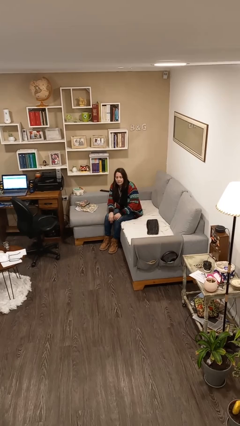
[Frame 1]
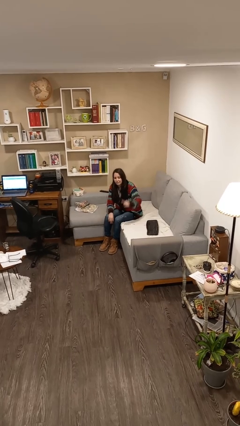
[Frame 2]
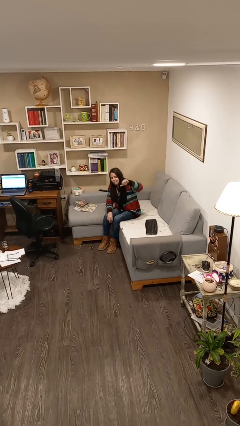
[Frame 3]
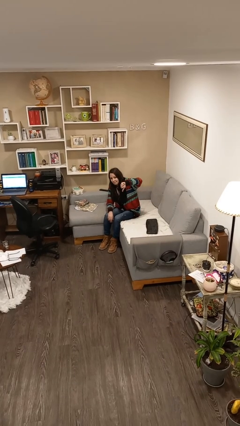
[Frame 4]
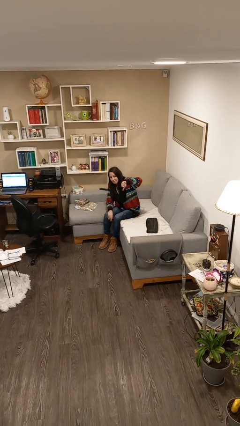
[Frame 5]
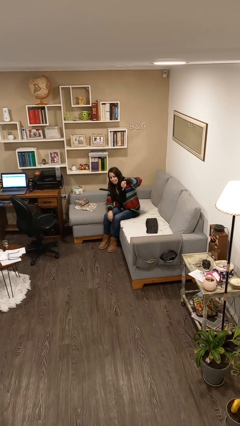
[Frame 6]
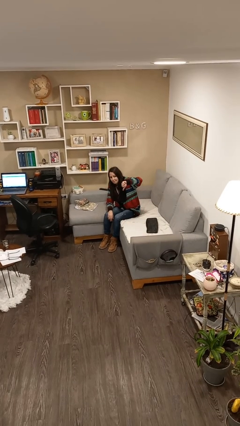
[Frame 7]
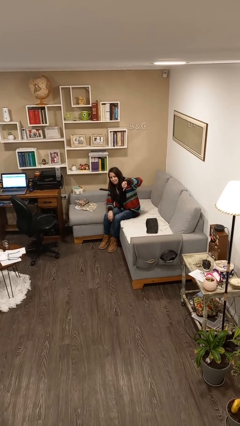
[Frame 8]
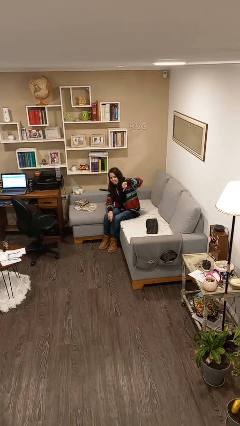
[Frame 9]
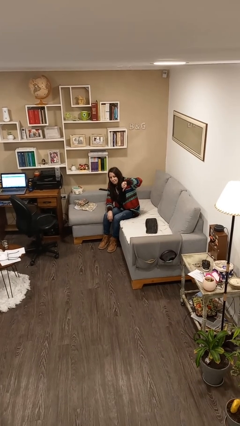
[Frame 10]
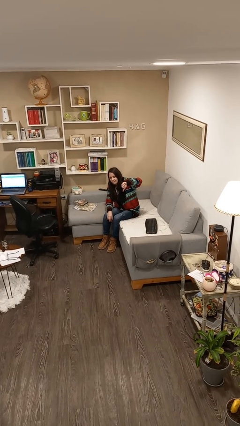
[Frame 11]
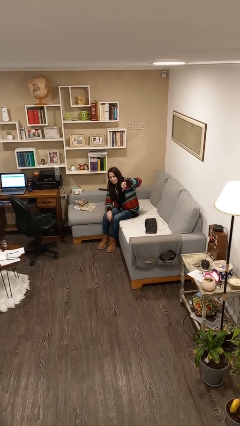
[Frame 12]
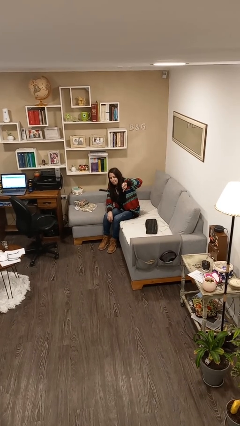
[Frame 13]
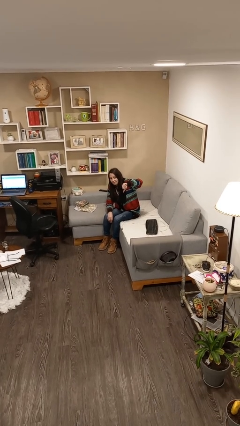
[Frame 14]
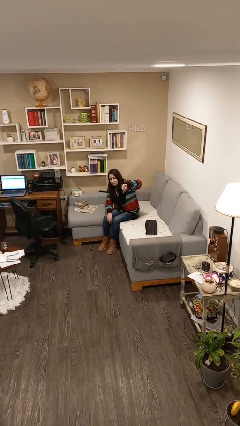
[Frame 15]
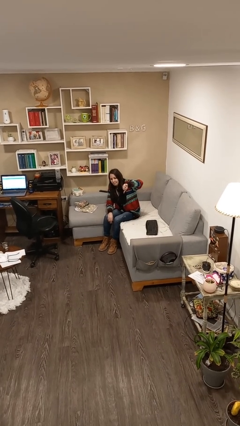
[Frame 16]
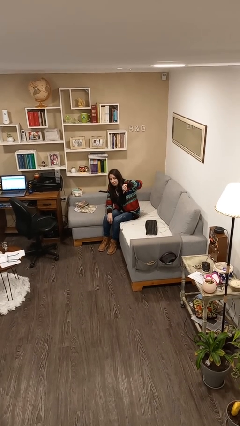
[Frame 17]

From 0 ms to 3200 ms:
person gestures thumbs down

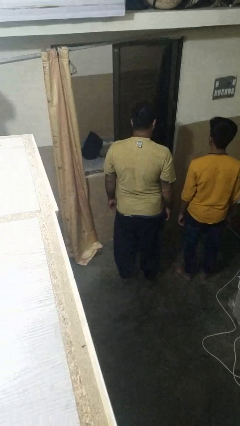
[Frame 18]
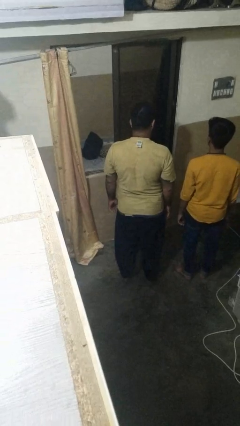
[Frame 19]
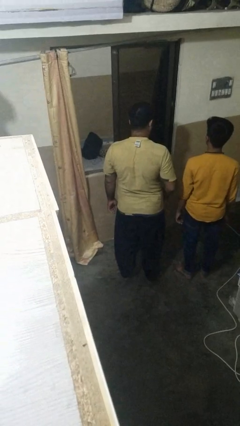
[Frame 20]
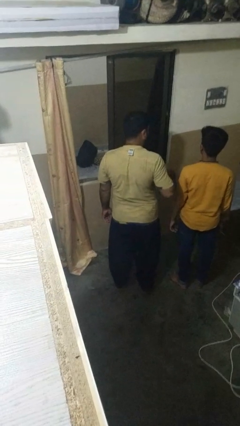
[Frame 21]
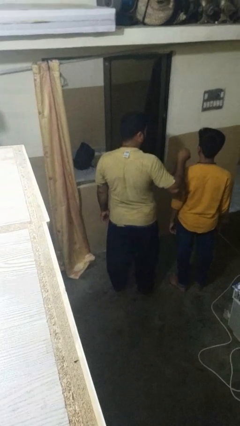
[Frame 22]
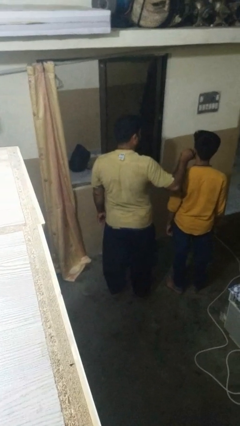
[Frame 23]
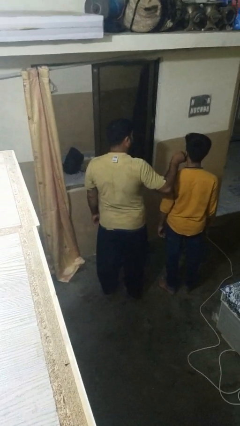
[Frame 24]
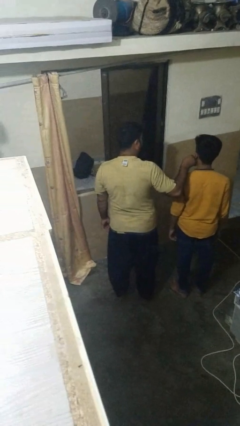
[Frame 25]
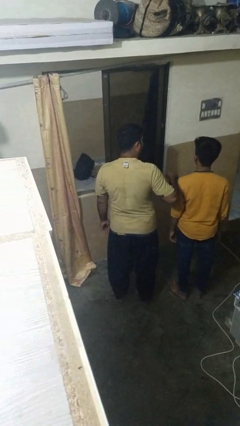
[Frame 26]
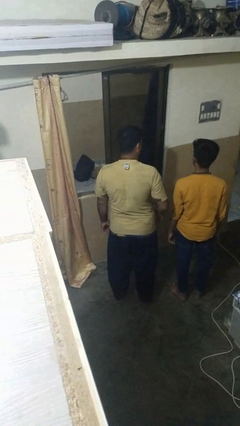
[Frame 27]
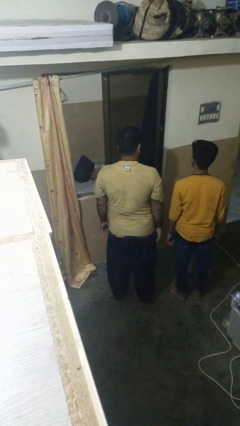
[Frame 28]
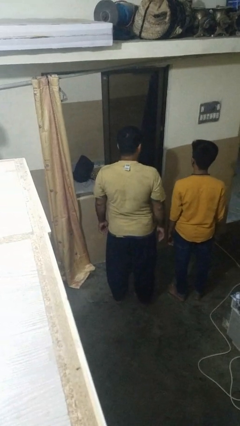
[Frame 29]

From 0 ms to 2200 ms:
person touches face of person

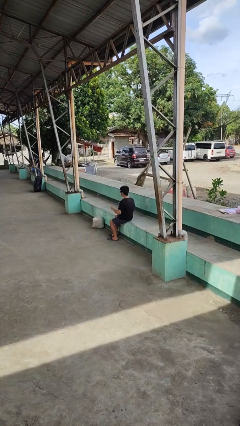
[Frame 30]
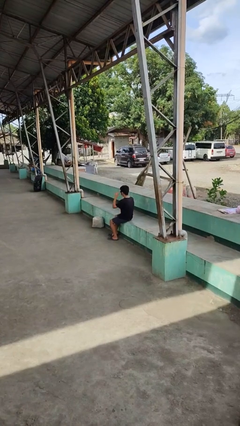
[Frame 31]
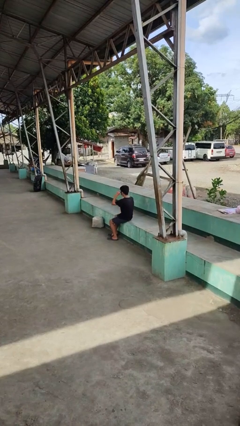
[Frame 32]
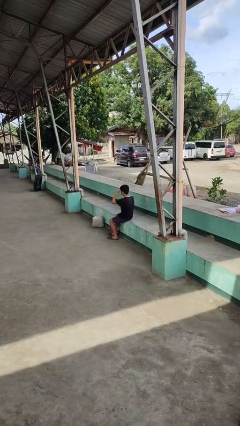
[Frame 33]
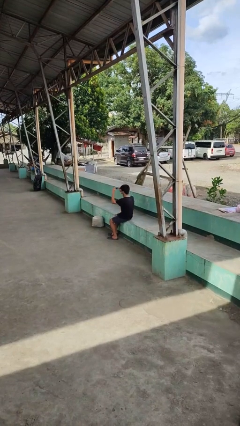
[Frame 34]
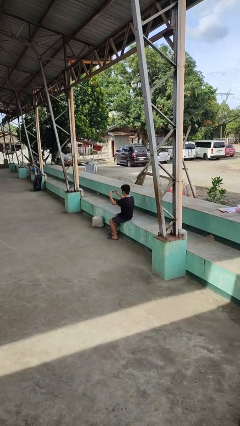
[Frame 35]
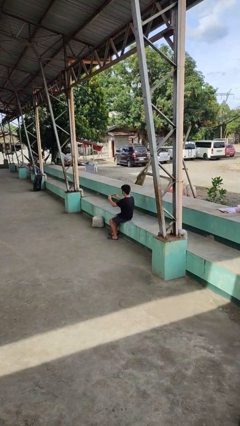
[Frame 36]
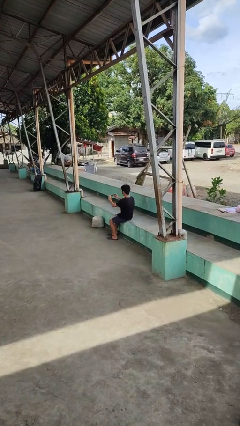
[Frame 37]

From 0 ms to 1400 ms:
person takes off sunglasses

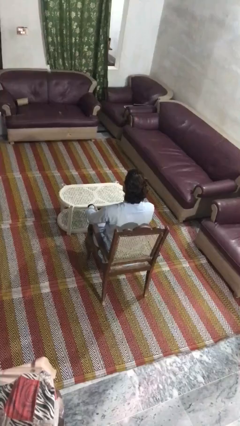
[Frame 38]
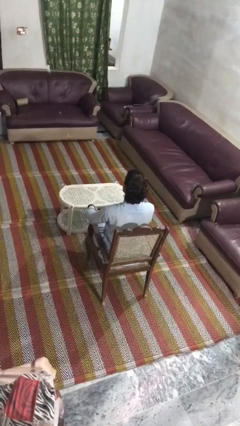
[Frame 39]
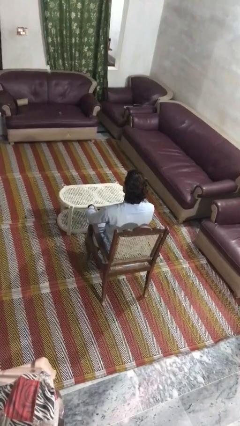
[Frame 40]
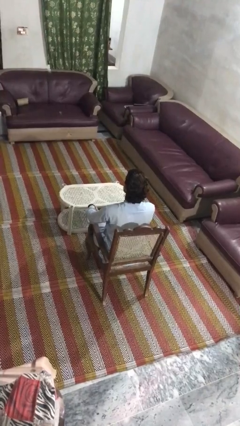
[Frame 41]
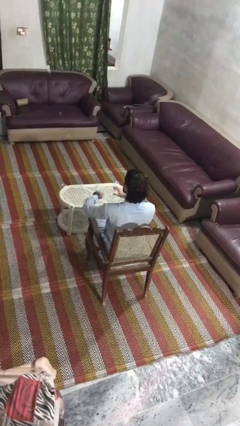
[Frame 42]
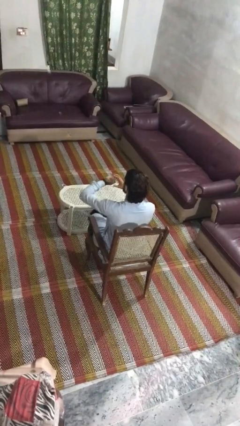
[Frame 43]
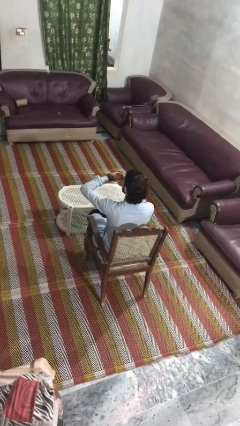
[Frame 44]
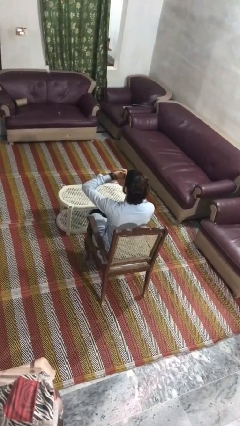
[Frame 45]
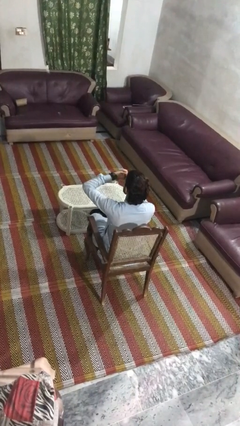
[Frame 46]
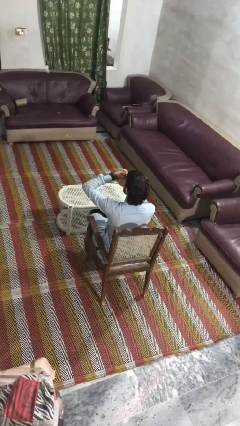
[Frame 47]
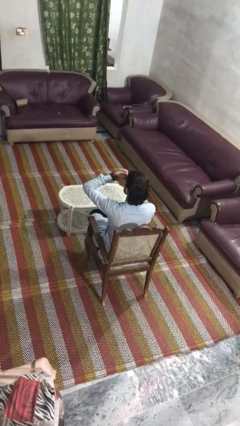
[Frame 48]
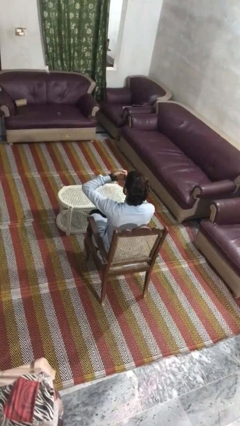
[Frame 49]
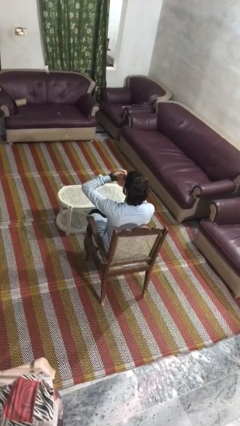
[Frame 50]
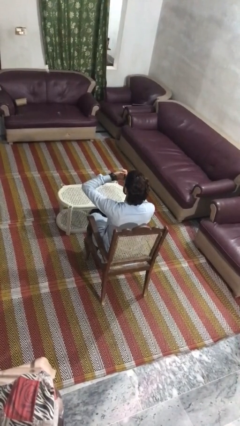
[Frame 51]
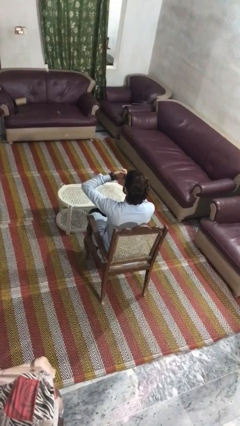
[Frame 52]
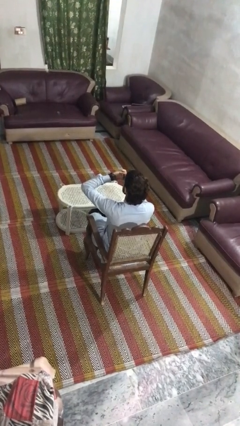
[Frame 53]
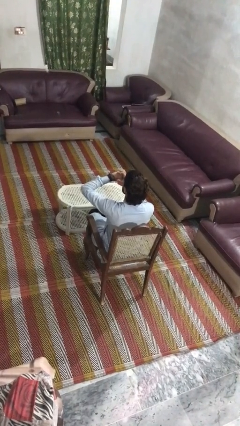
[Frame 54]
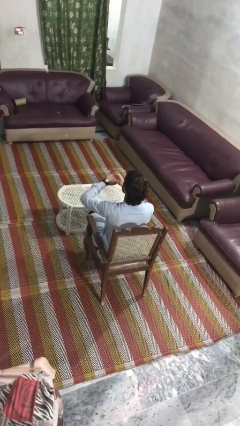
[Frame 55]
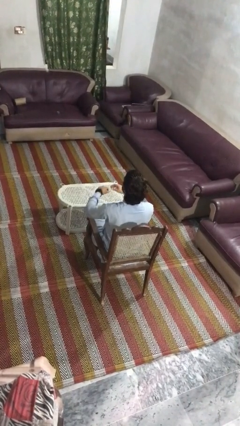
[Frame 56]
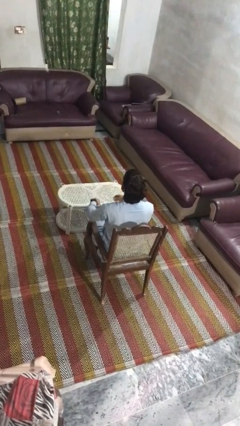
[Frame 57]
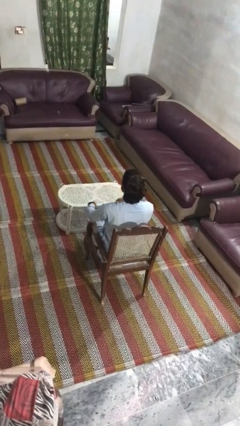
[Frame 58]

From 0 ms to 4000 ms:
person looks at wristwatch

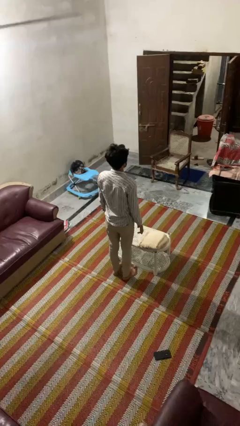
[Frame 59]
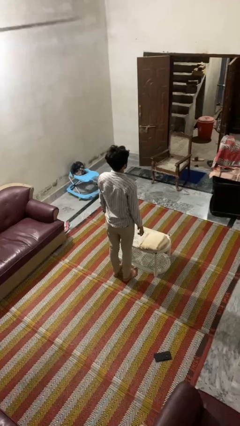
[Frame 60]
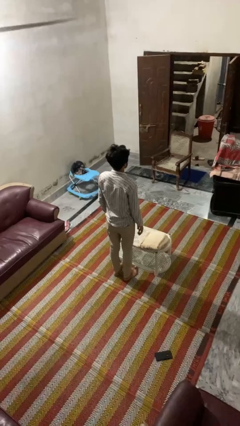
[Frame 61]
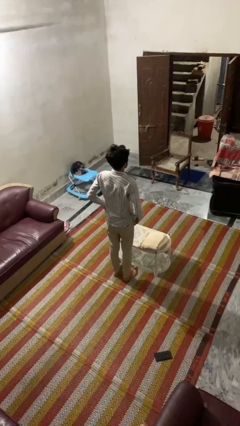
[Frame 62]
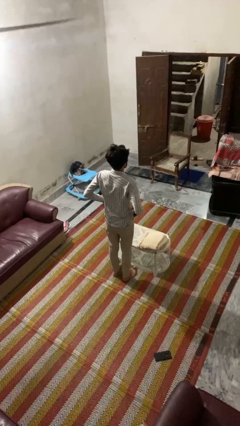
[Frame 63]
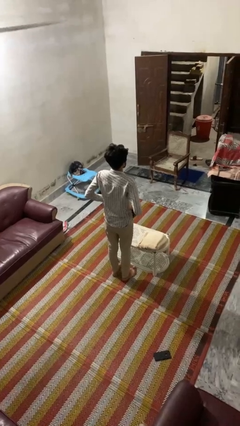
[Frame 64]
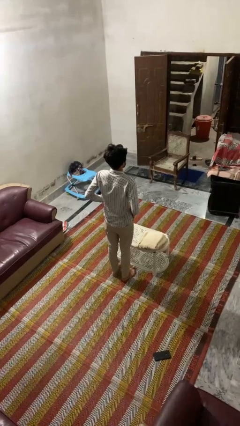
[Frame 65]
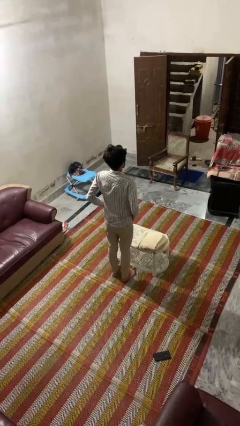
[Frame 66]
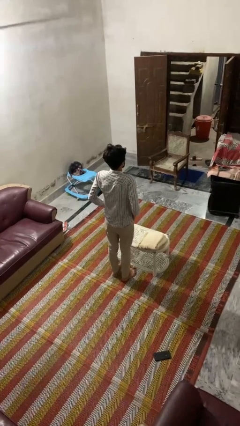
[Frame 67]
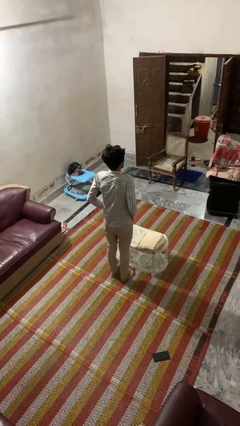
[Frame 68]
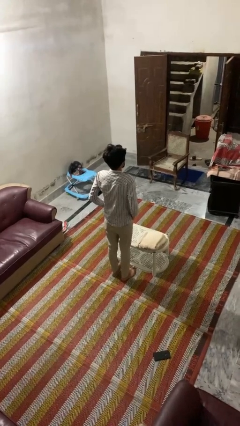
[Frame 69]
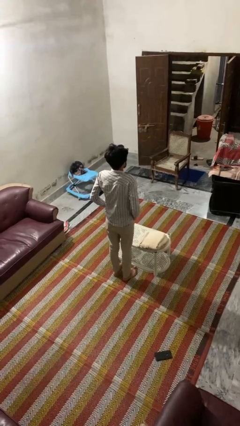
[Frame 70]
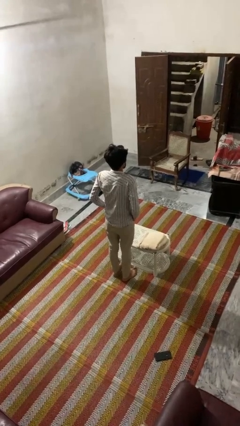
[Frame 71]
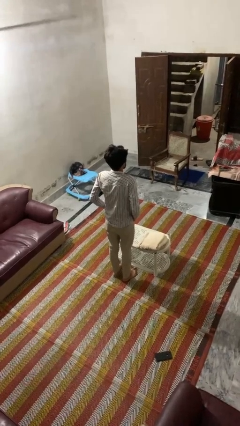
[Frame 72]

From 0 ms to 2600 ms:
person puts hands in back pockets

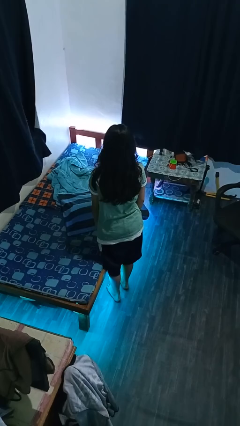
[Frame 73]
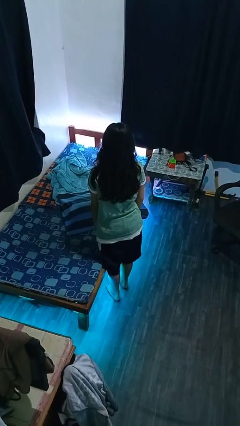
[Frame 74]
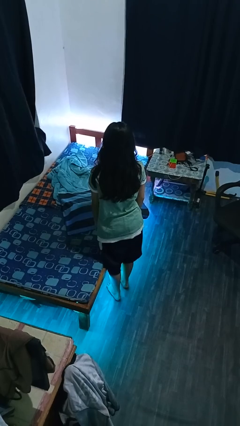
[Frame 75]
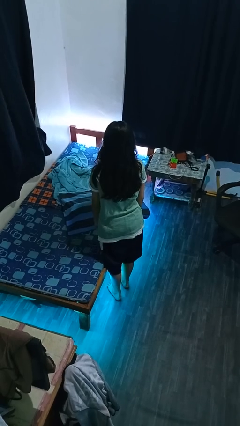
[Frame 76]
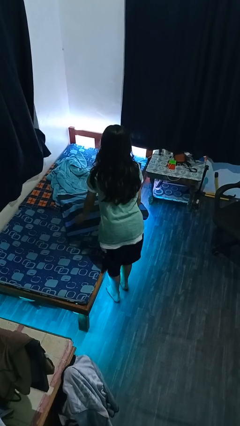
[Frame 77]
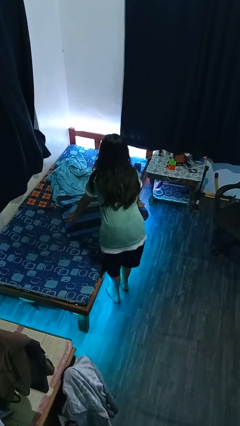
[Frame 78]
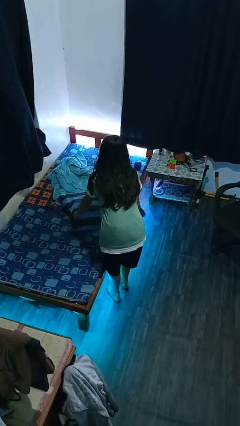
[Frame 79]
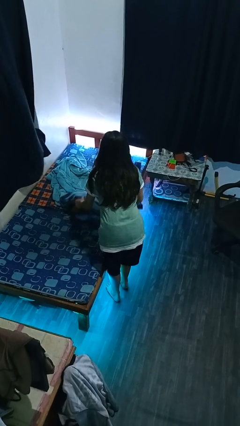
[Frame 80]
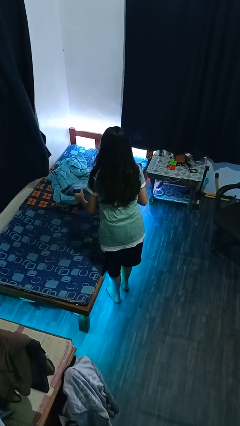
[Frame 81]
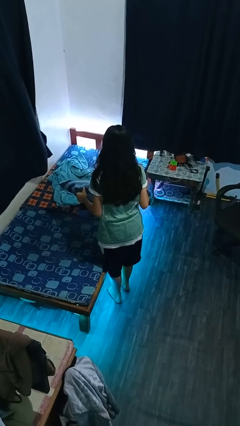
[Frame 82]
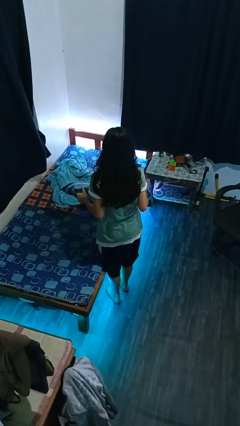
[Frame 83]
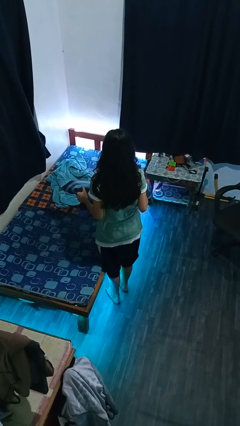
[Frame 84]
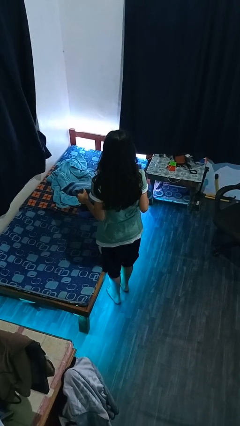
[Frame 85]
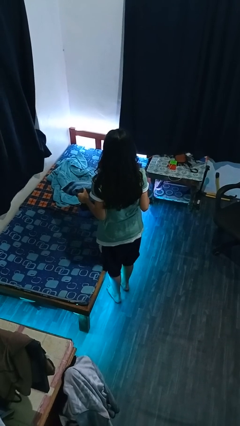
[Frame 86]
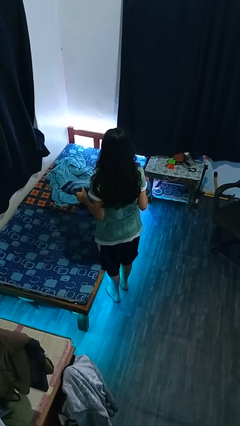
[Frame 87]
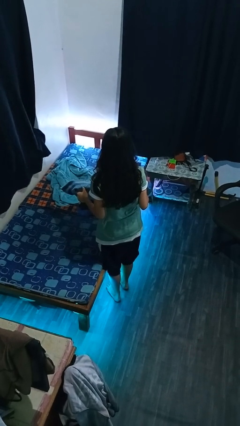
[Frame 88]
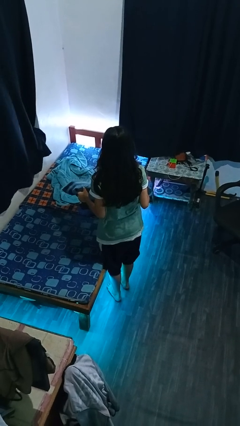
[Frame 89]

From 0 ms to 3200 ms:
person picks up object from bed
